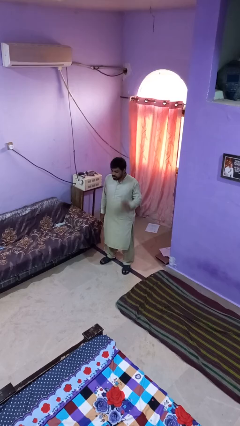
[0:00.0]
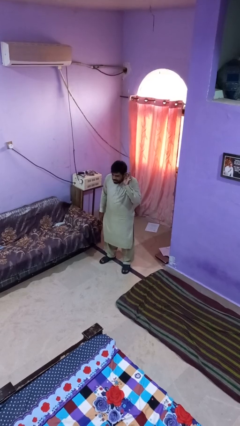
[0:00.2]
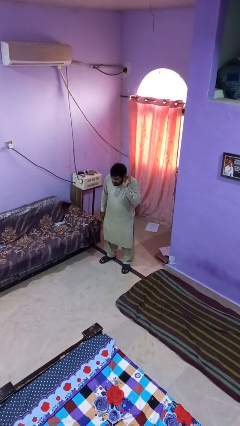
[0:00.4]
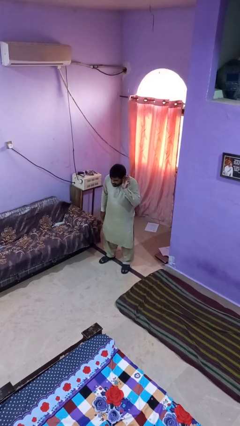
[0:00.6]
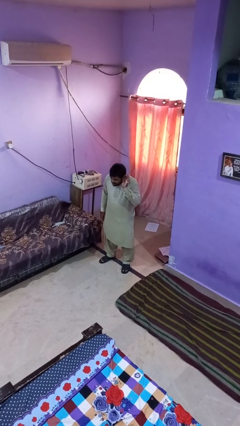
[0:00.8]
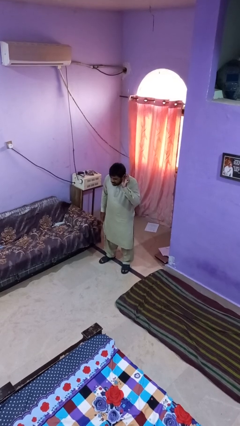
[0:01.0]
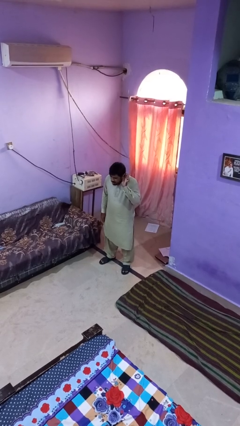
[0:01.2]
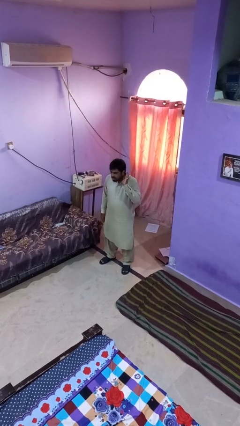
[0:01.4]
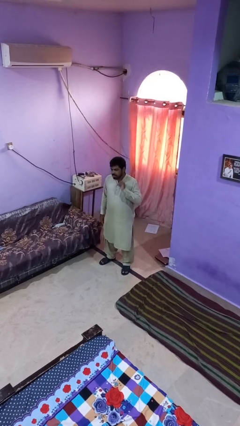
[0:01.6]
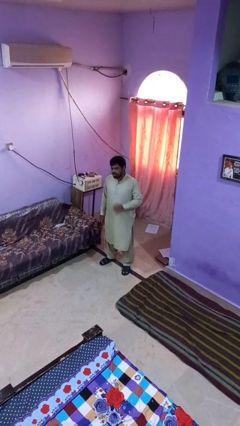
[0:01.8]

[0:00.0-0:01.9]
person gestures listen closely

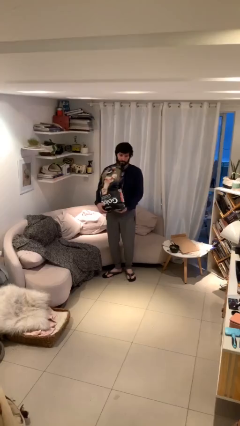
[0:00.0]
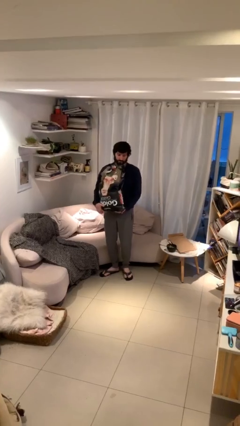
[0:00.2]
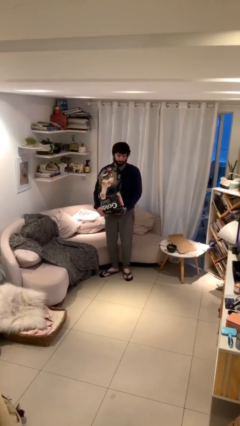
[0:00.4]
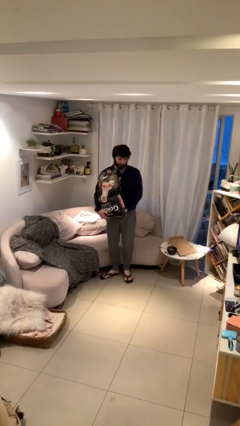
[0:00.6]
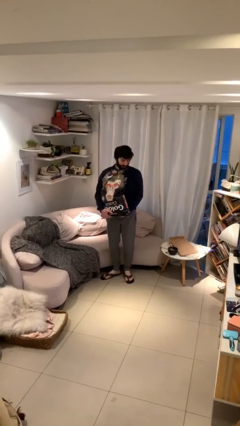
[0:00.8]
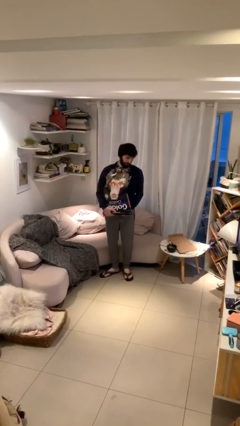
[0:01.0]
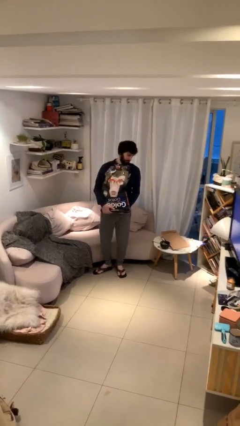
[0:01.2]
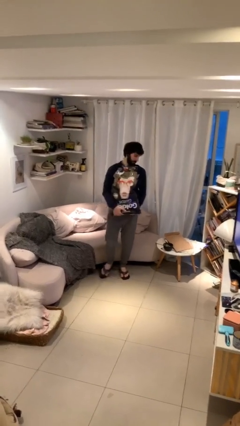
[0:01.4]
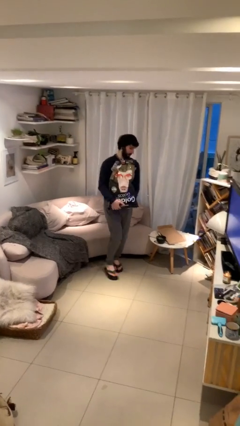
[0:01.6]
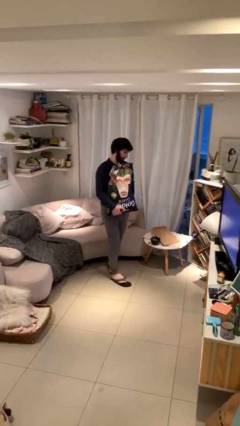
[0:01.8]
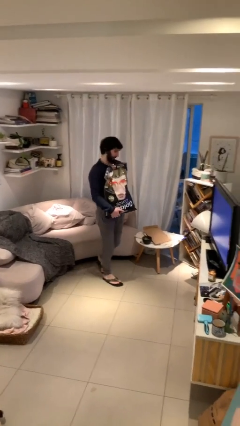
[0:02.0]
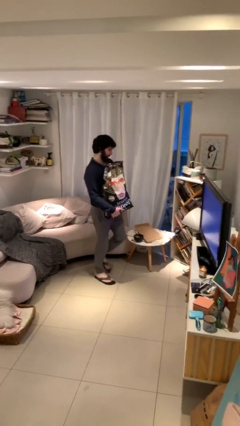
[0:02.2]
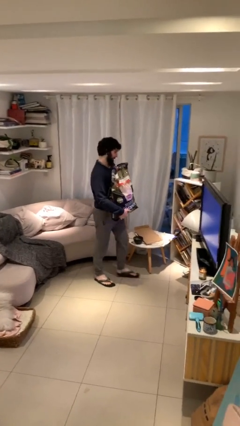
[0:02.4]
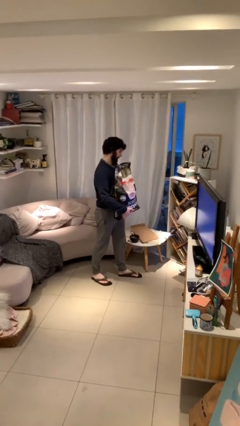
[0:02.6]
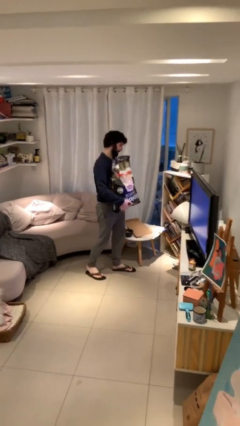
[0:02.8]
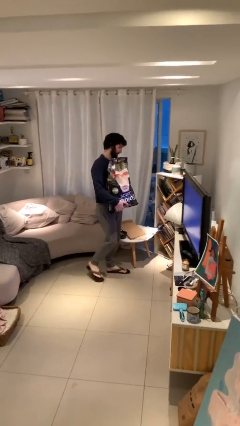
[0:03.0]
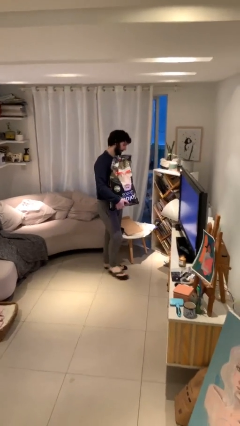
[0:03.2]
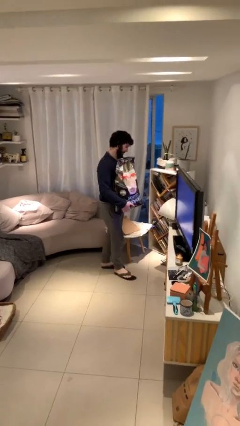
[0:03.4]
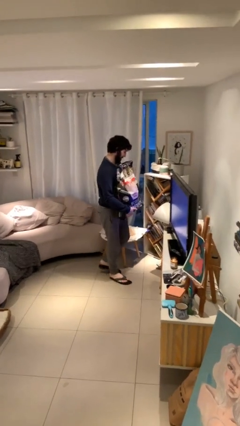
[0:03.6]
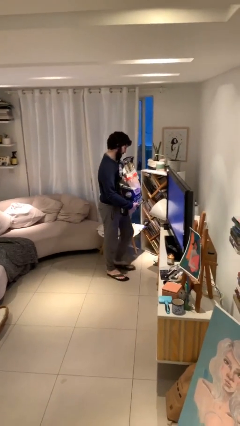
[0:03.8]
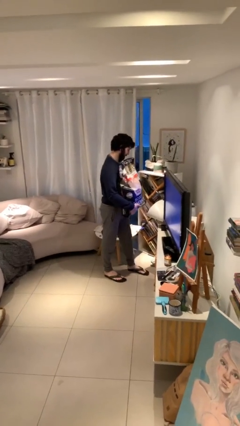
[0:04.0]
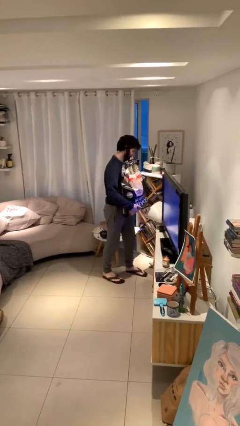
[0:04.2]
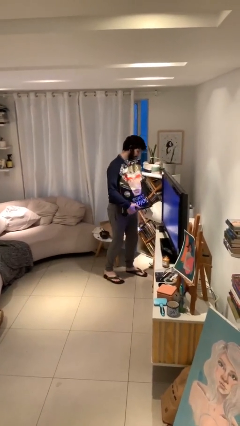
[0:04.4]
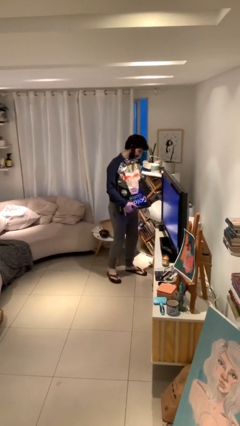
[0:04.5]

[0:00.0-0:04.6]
person carries heavy object

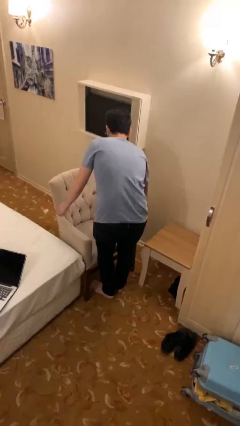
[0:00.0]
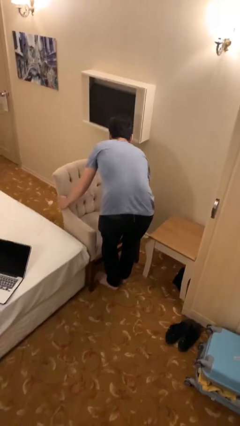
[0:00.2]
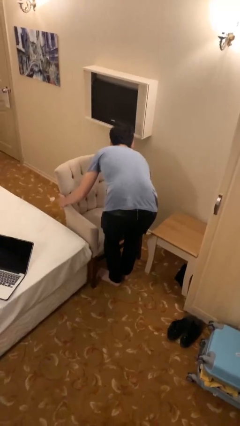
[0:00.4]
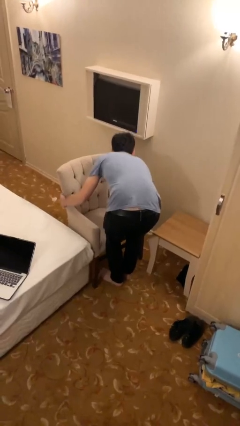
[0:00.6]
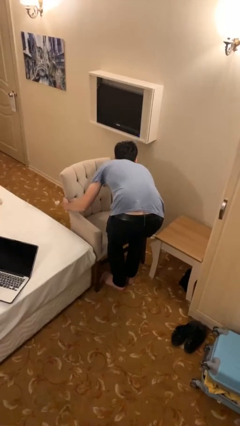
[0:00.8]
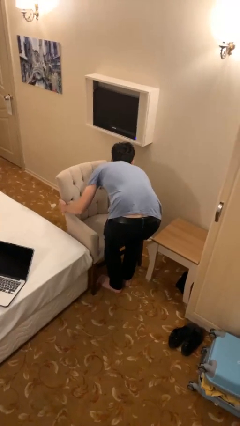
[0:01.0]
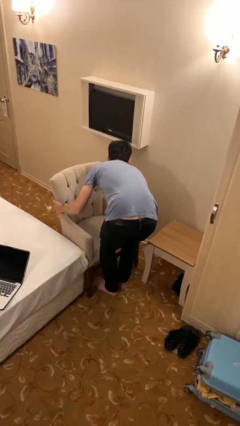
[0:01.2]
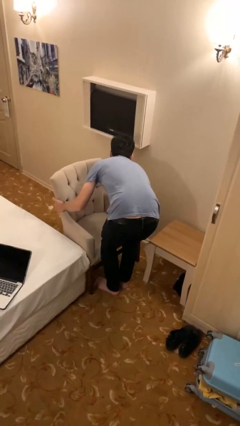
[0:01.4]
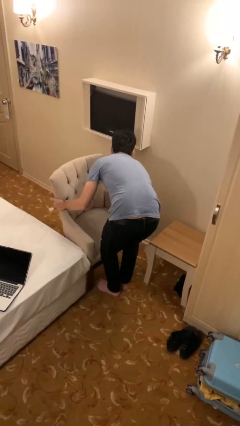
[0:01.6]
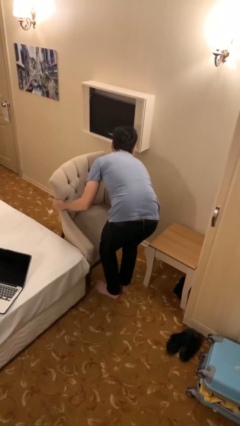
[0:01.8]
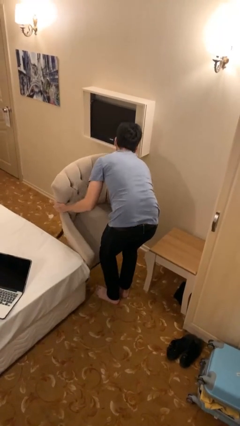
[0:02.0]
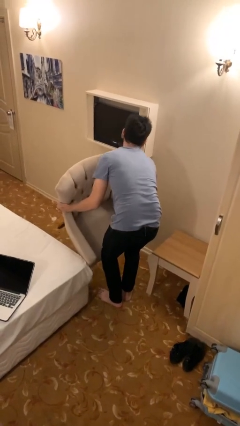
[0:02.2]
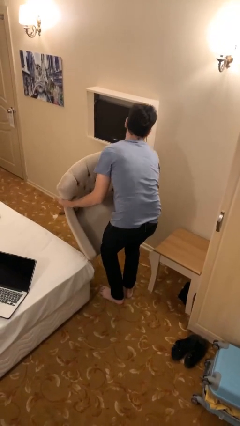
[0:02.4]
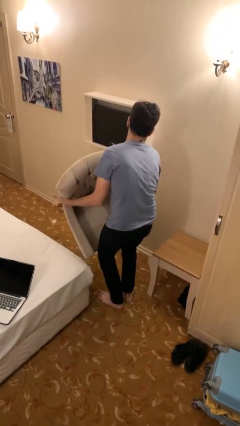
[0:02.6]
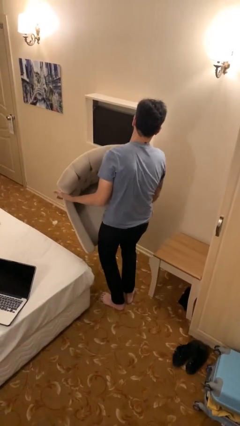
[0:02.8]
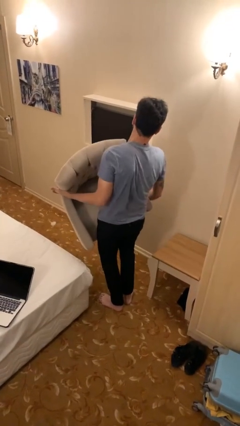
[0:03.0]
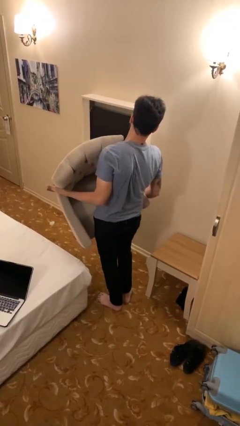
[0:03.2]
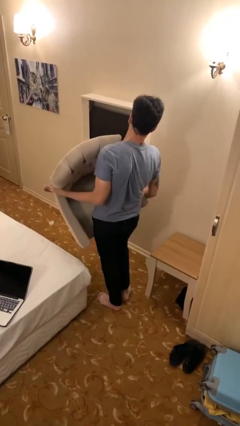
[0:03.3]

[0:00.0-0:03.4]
person picks up object from floor

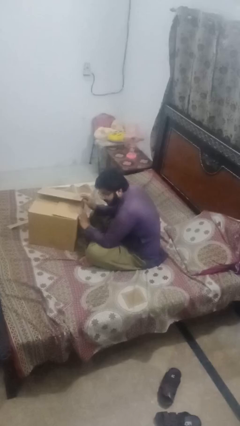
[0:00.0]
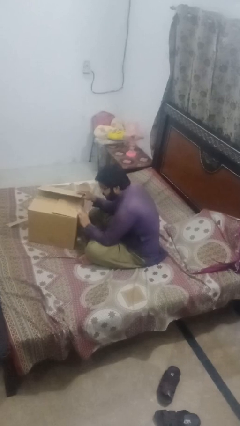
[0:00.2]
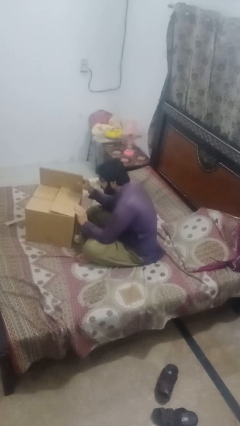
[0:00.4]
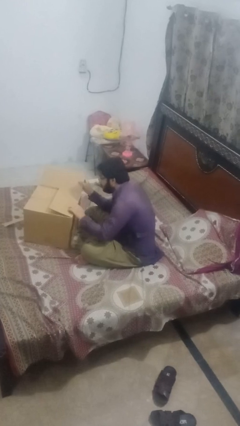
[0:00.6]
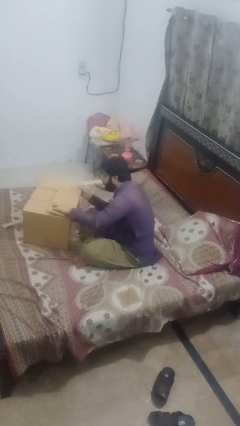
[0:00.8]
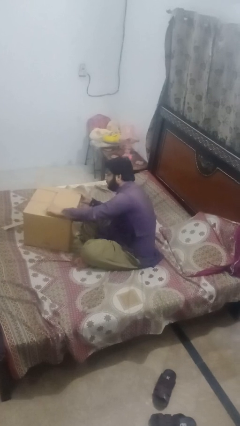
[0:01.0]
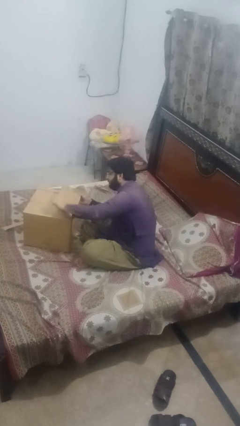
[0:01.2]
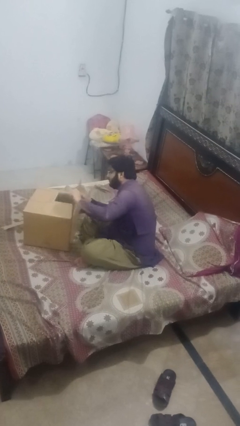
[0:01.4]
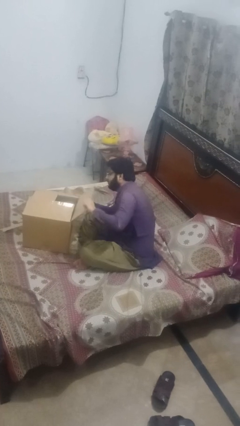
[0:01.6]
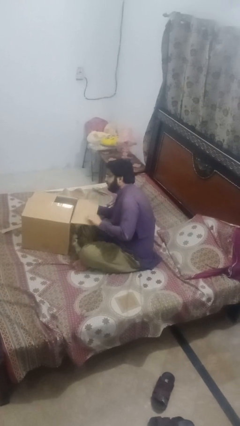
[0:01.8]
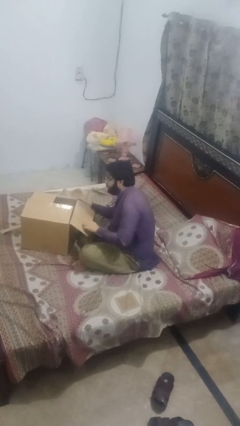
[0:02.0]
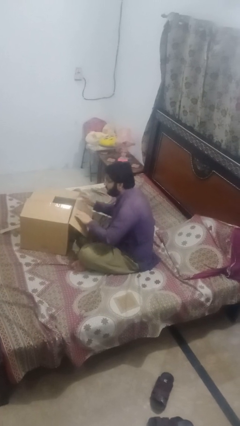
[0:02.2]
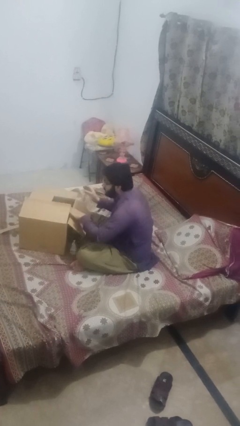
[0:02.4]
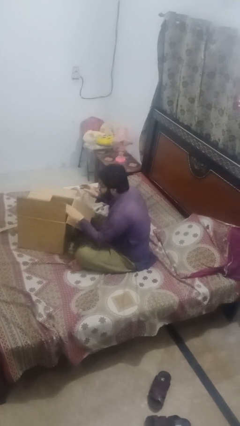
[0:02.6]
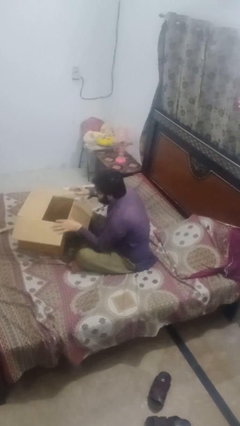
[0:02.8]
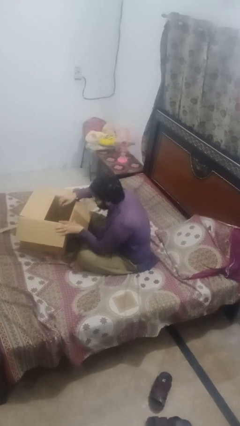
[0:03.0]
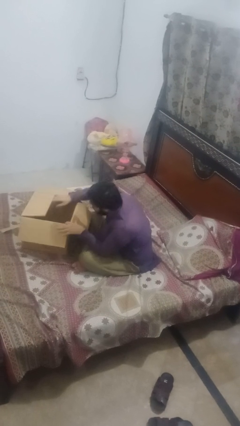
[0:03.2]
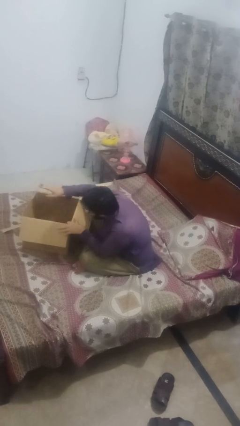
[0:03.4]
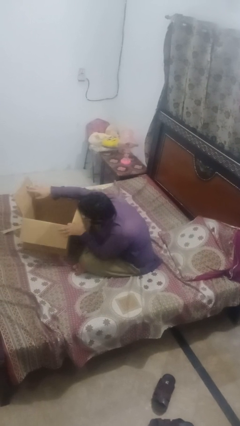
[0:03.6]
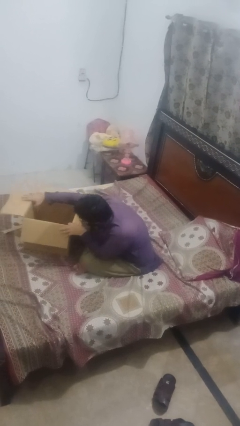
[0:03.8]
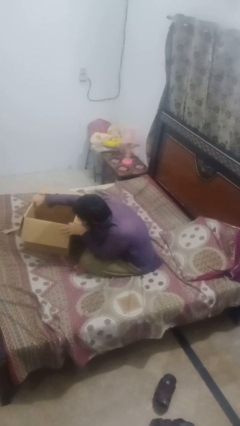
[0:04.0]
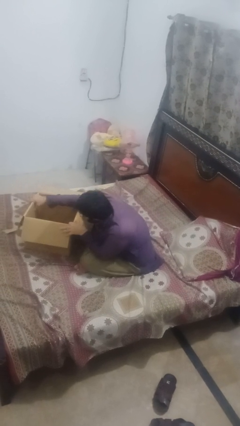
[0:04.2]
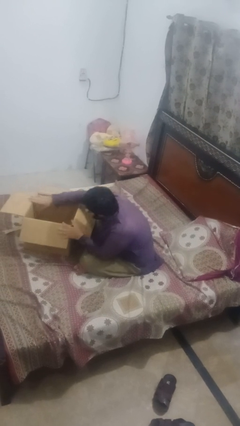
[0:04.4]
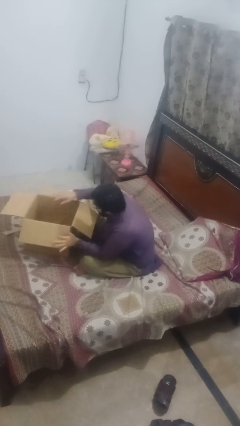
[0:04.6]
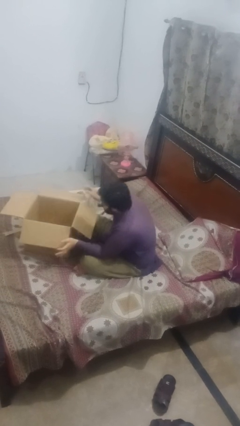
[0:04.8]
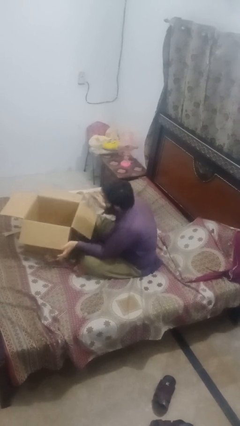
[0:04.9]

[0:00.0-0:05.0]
person opens box

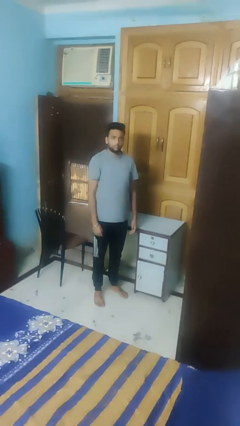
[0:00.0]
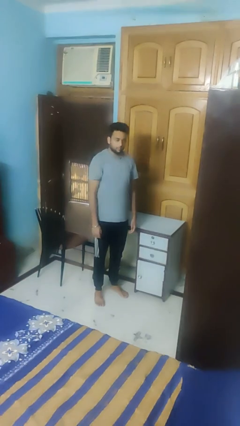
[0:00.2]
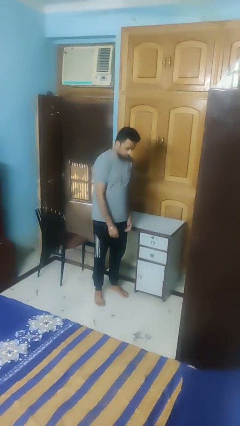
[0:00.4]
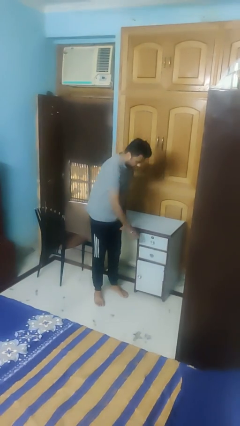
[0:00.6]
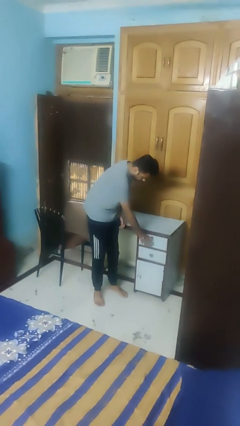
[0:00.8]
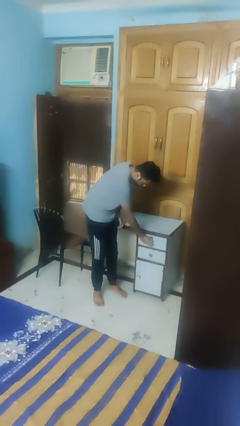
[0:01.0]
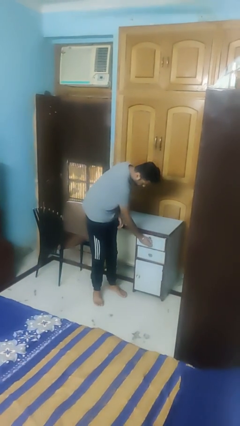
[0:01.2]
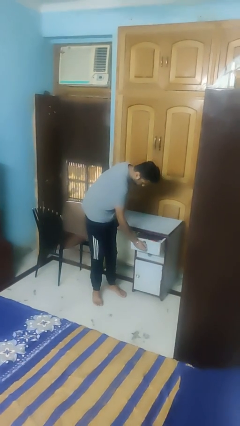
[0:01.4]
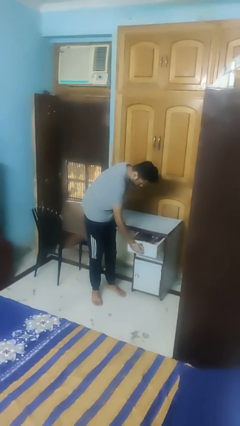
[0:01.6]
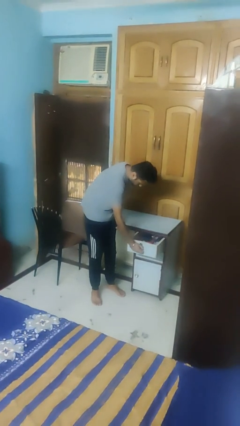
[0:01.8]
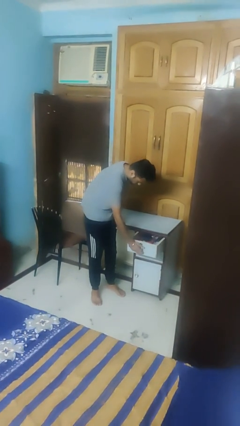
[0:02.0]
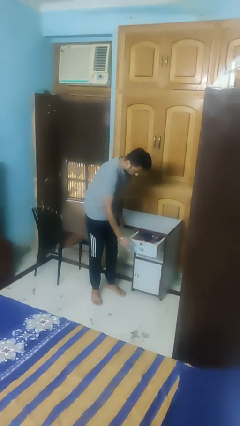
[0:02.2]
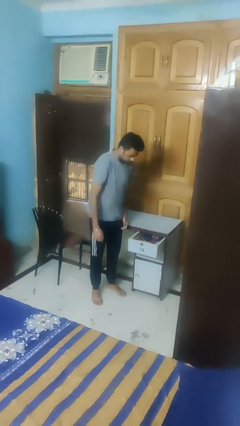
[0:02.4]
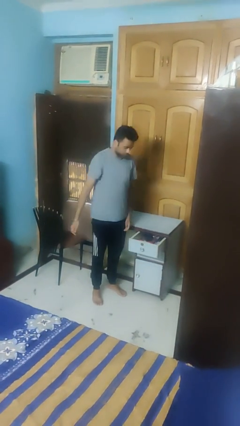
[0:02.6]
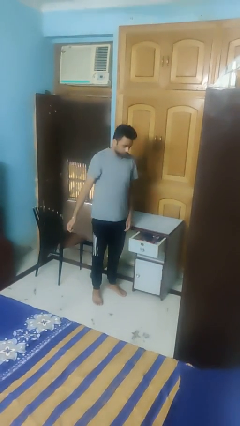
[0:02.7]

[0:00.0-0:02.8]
person opens dresser drawer
